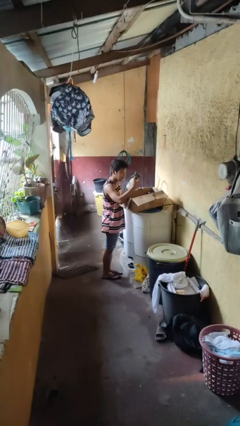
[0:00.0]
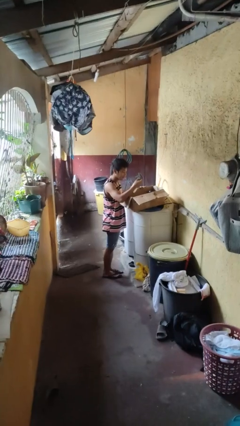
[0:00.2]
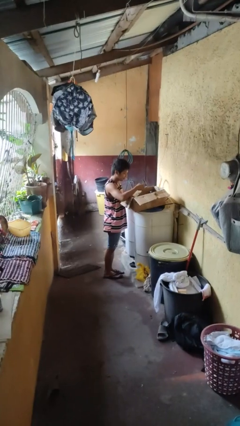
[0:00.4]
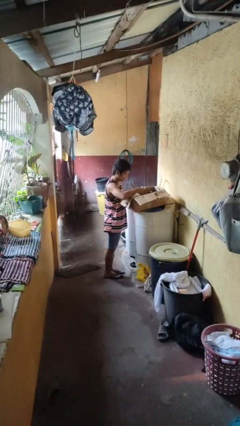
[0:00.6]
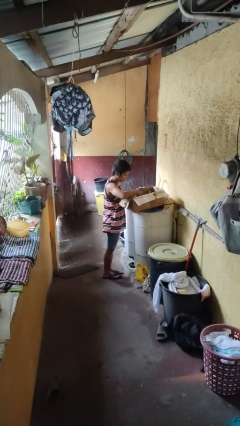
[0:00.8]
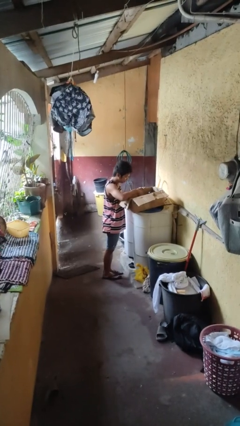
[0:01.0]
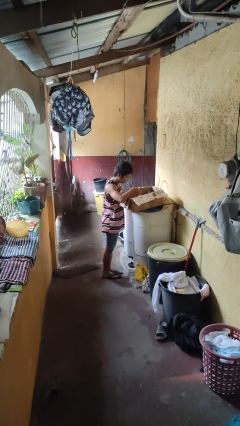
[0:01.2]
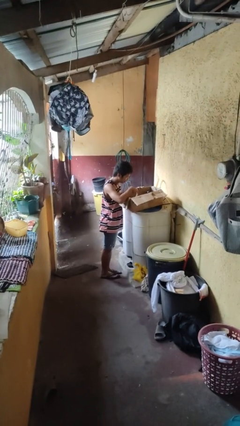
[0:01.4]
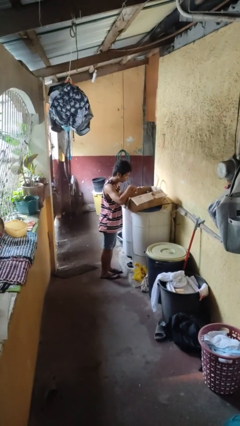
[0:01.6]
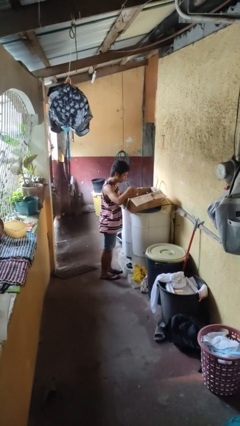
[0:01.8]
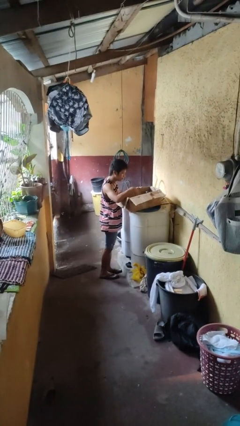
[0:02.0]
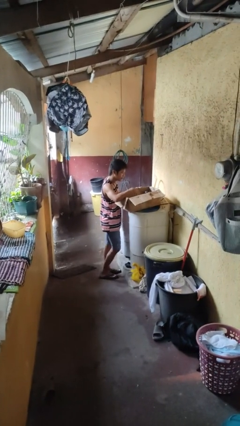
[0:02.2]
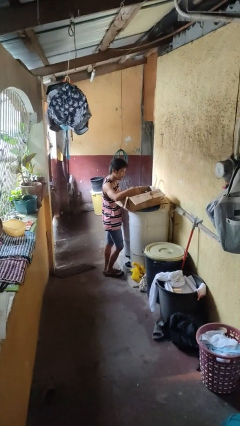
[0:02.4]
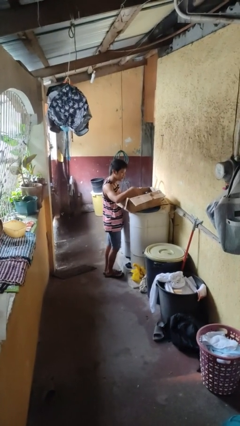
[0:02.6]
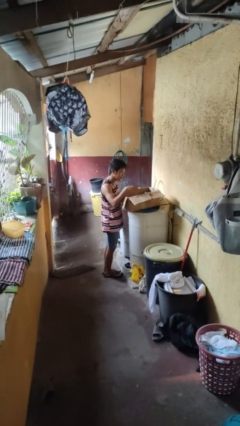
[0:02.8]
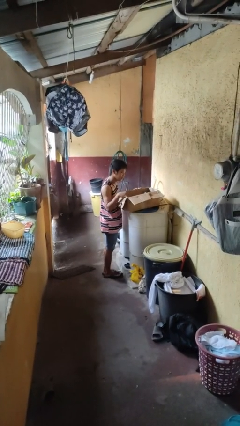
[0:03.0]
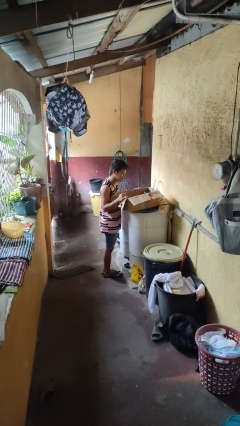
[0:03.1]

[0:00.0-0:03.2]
person puts object into box

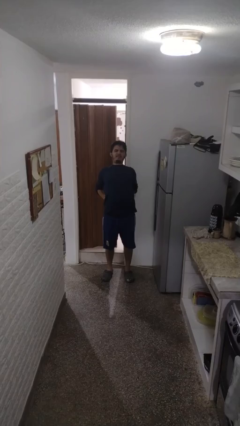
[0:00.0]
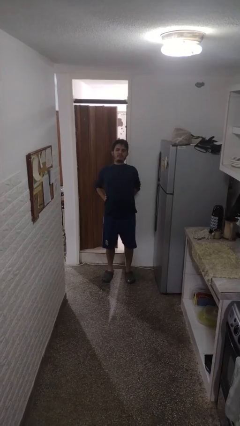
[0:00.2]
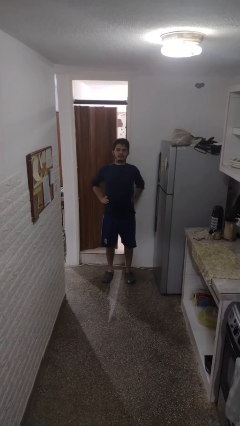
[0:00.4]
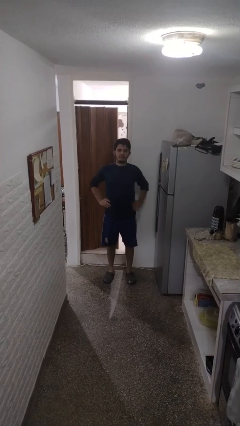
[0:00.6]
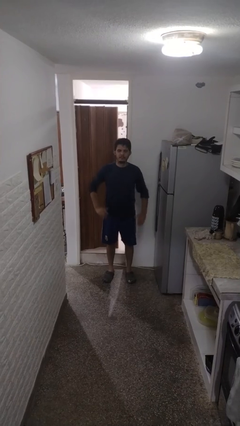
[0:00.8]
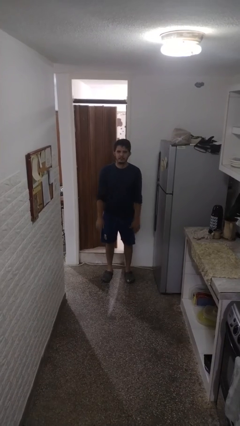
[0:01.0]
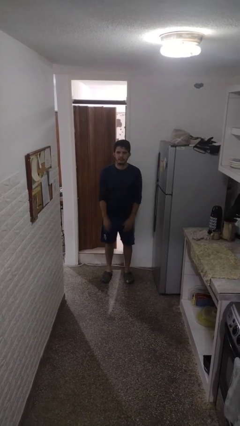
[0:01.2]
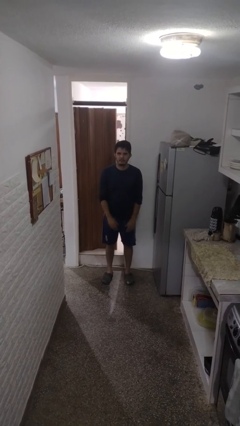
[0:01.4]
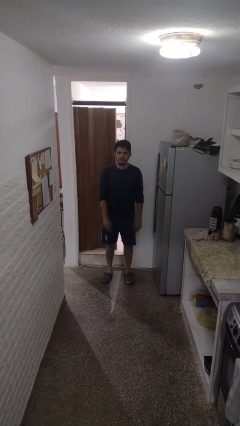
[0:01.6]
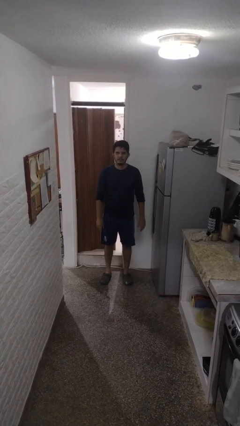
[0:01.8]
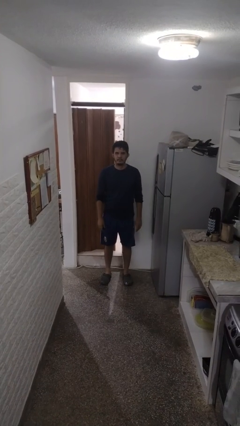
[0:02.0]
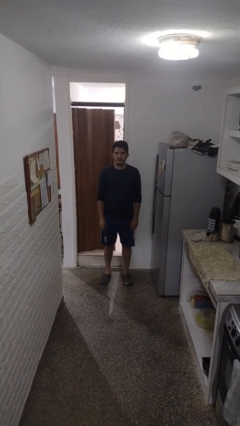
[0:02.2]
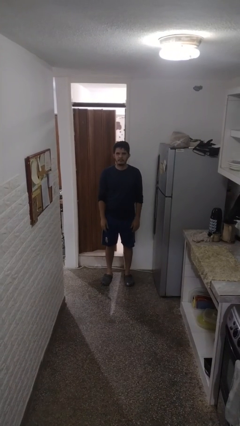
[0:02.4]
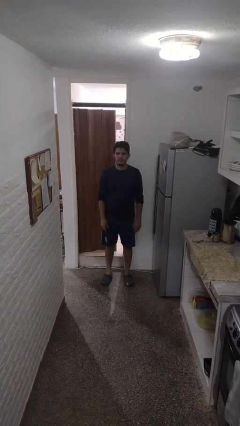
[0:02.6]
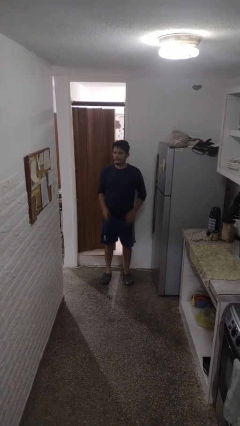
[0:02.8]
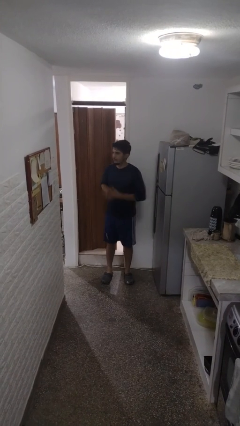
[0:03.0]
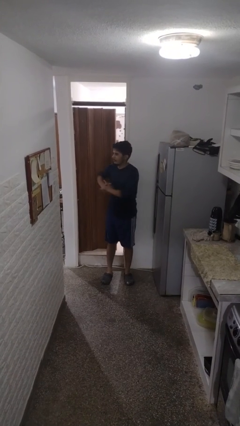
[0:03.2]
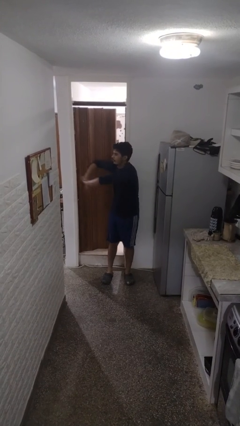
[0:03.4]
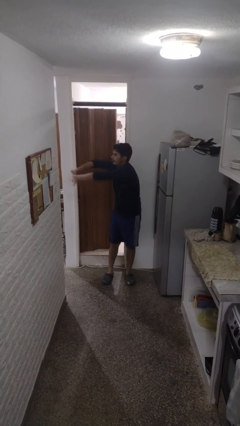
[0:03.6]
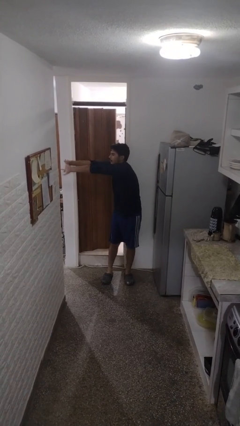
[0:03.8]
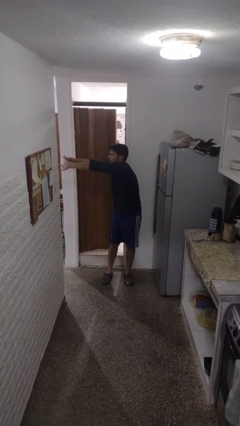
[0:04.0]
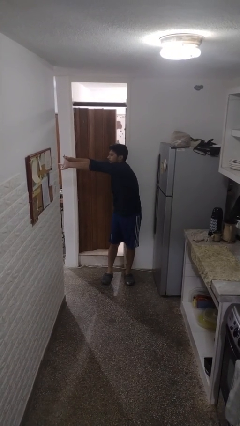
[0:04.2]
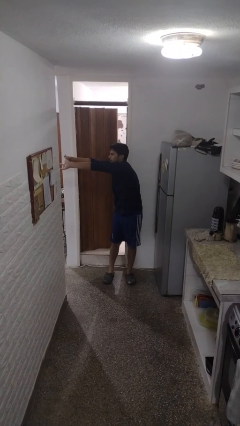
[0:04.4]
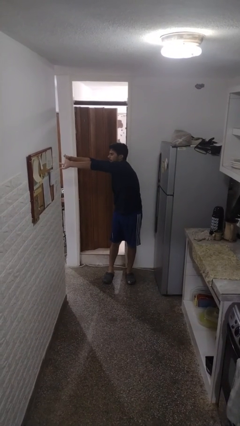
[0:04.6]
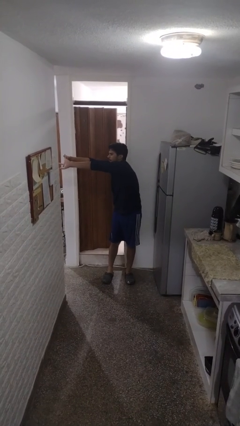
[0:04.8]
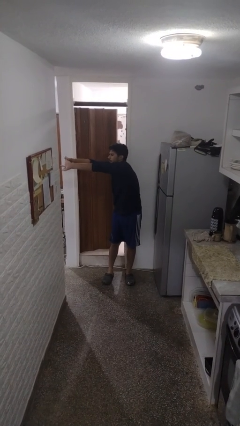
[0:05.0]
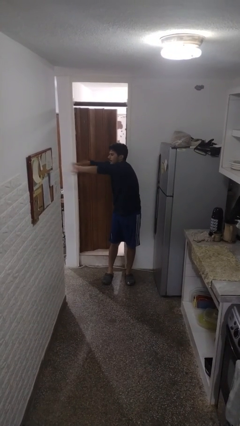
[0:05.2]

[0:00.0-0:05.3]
person stretches arms to side

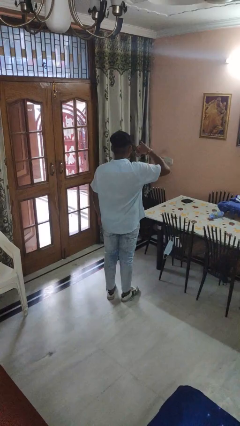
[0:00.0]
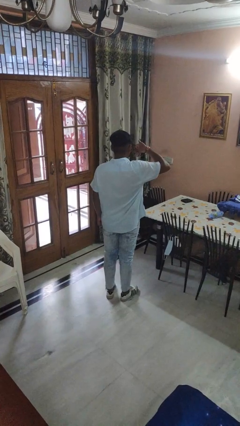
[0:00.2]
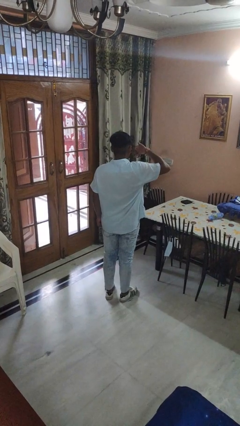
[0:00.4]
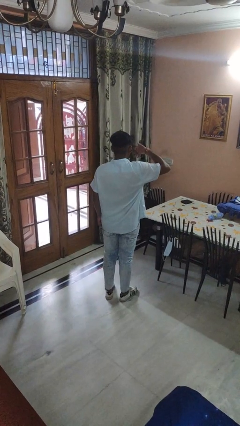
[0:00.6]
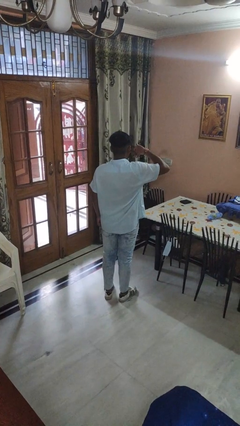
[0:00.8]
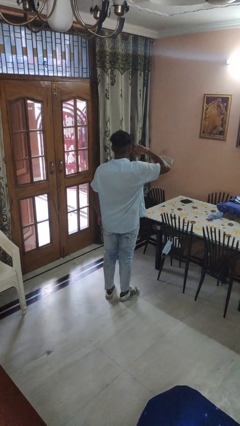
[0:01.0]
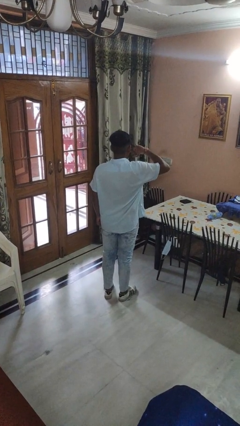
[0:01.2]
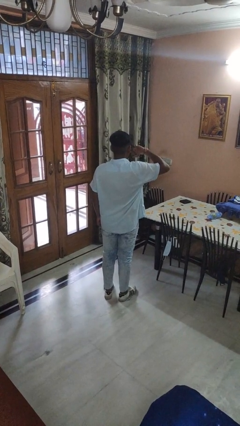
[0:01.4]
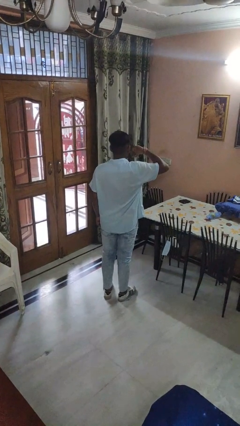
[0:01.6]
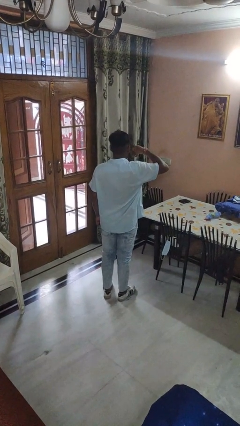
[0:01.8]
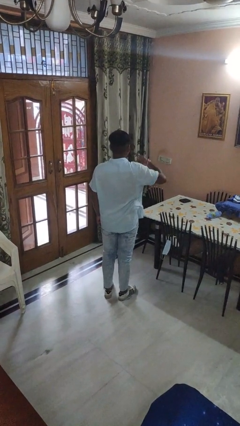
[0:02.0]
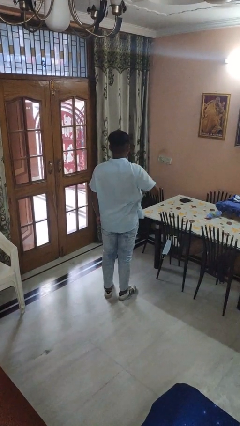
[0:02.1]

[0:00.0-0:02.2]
person gestures call me

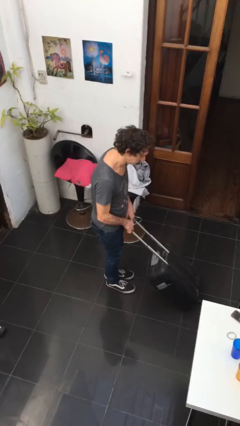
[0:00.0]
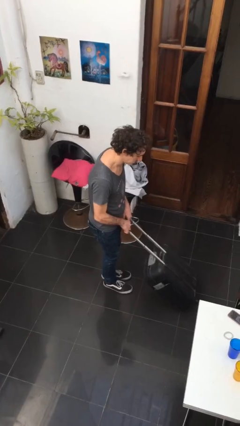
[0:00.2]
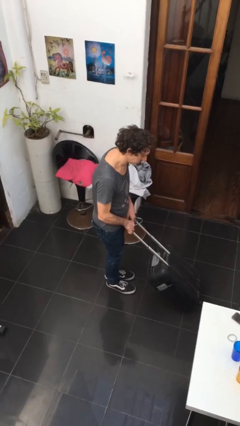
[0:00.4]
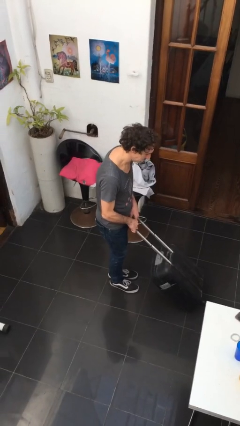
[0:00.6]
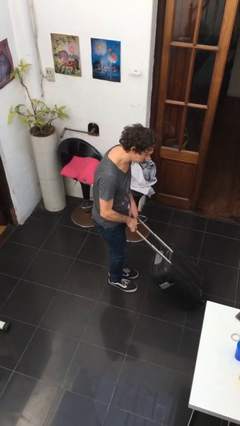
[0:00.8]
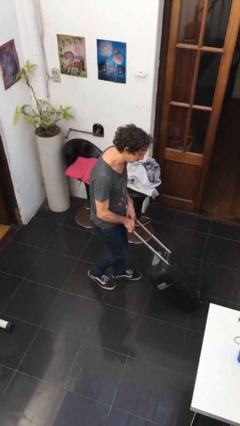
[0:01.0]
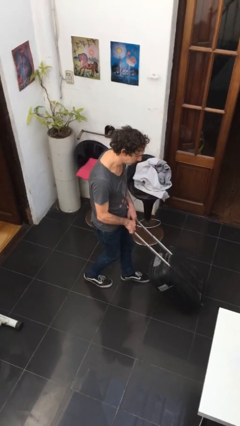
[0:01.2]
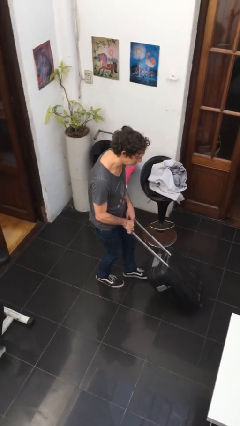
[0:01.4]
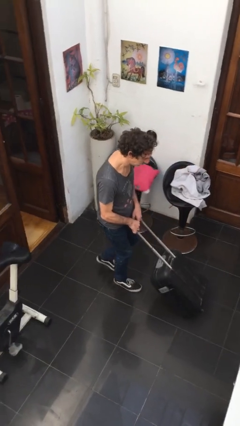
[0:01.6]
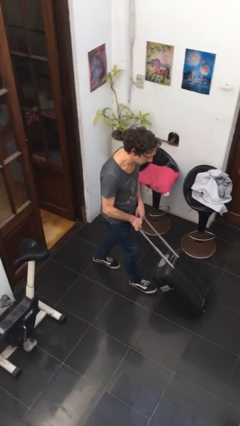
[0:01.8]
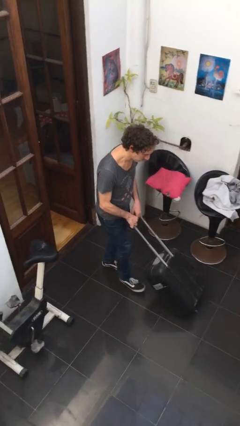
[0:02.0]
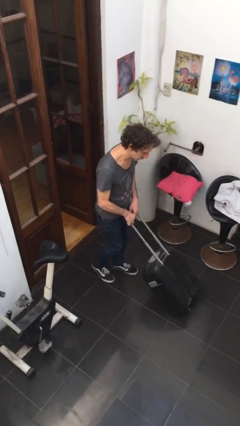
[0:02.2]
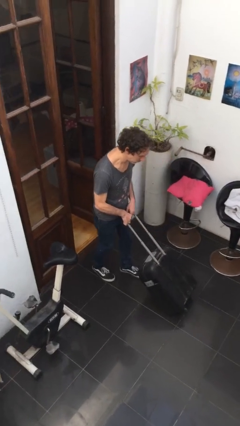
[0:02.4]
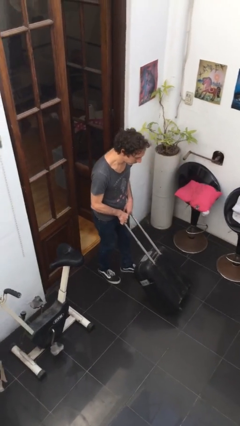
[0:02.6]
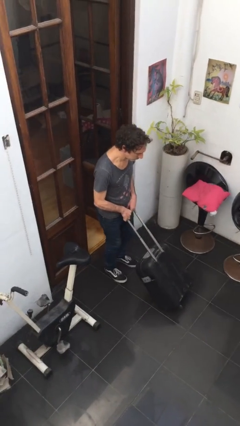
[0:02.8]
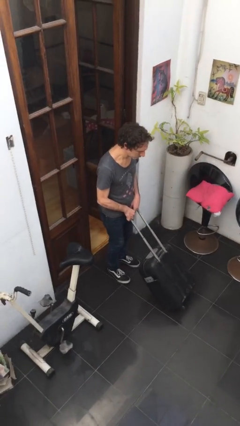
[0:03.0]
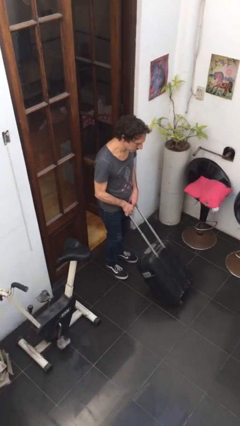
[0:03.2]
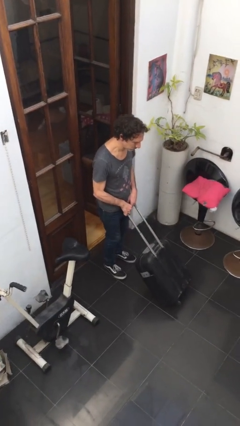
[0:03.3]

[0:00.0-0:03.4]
person pulls wheeled cart

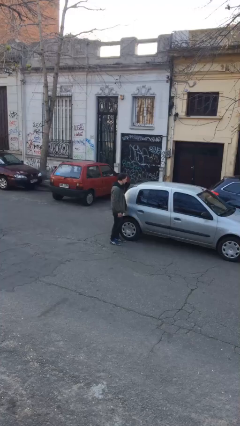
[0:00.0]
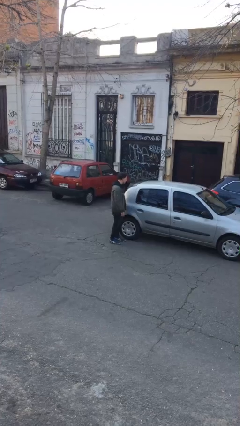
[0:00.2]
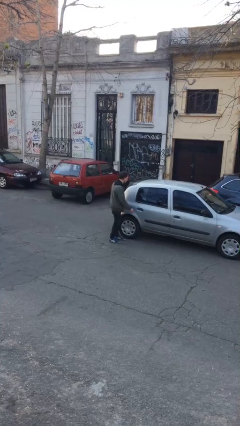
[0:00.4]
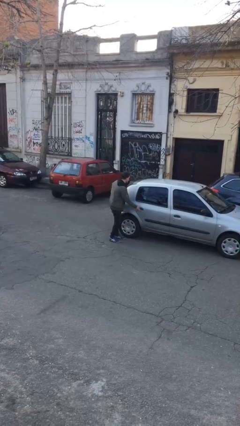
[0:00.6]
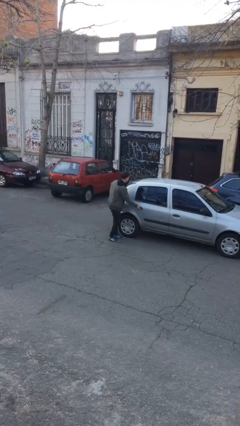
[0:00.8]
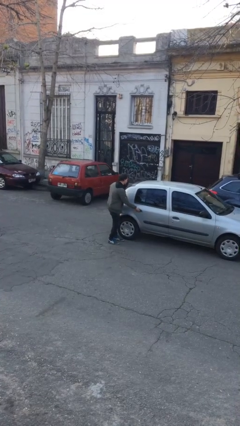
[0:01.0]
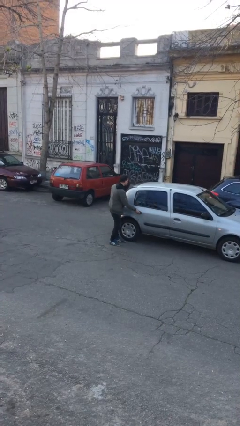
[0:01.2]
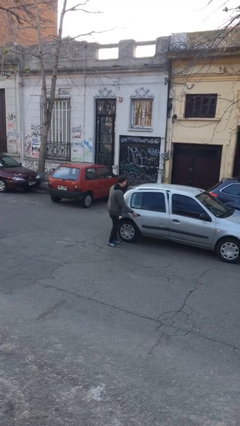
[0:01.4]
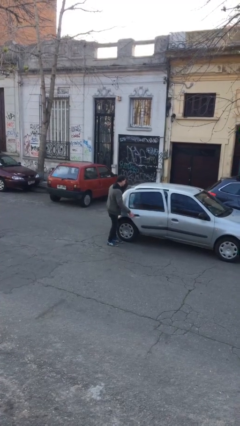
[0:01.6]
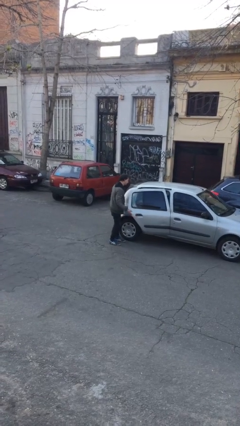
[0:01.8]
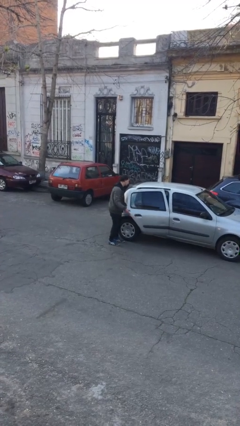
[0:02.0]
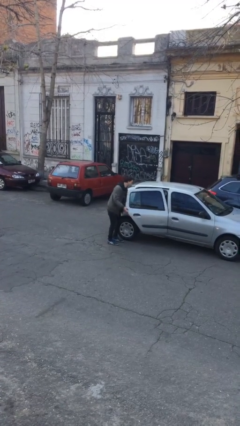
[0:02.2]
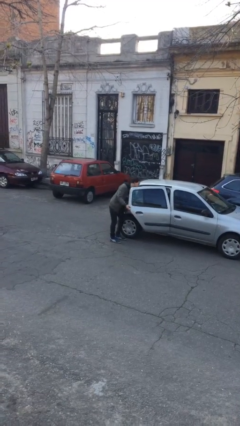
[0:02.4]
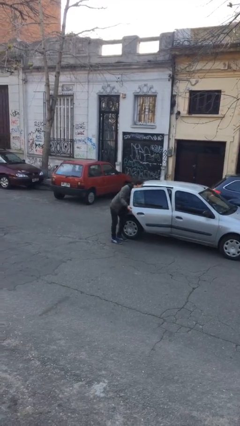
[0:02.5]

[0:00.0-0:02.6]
person opens car door

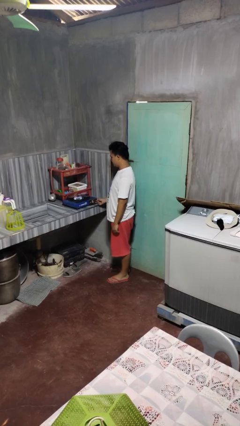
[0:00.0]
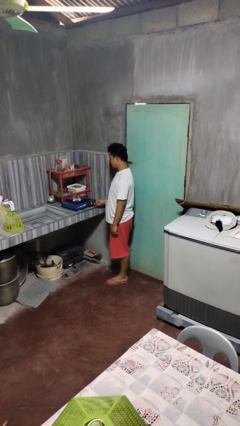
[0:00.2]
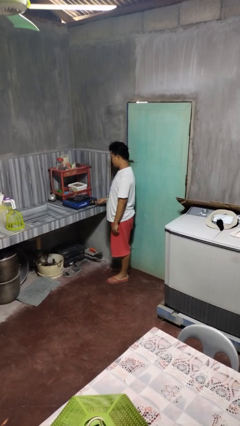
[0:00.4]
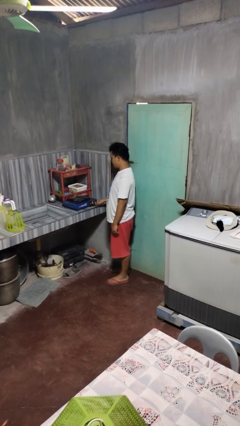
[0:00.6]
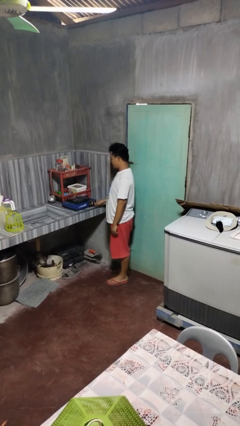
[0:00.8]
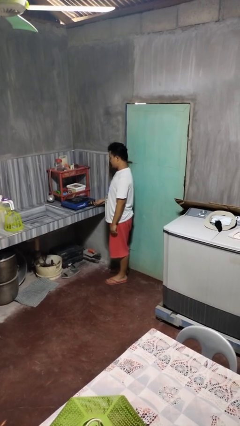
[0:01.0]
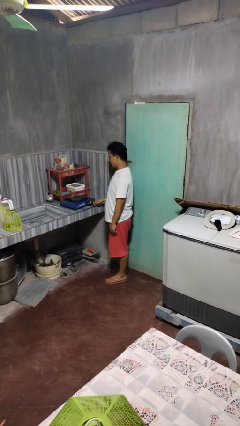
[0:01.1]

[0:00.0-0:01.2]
person turns off stovetop
